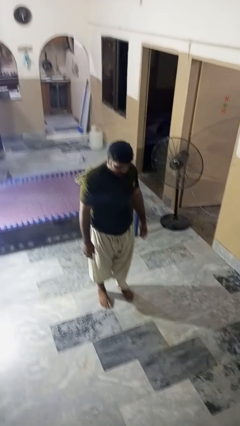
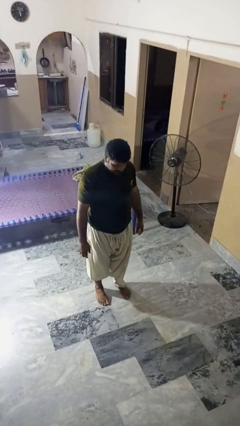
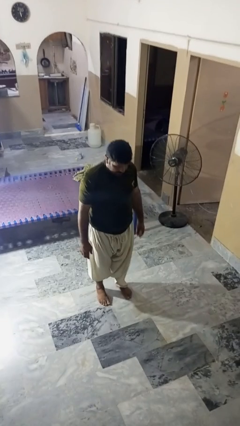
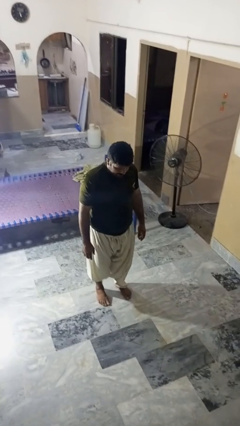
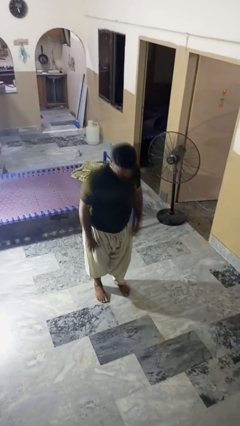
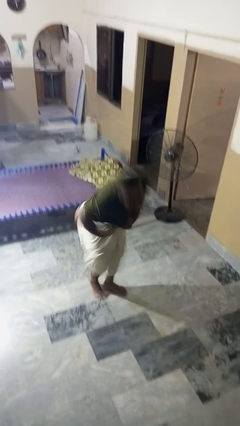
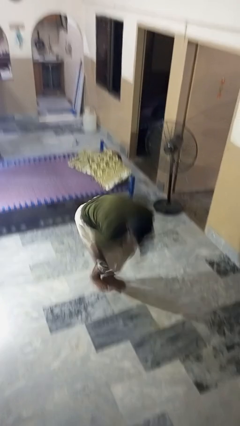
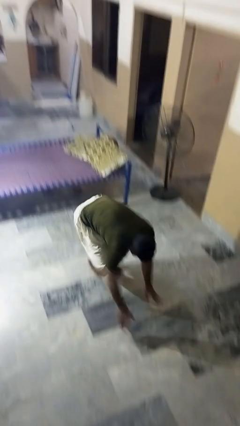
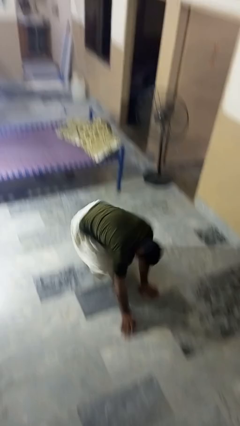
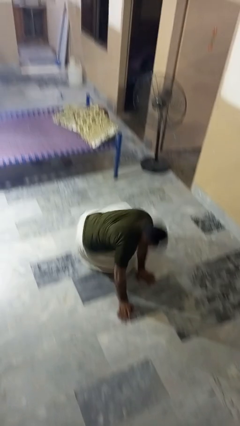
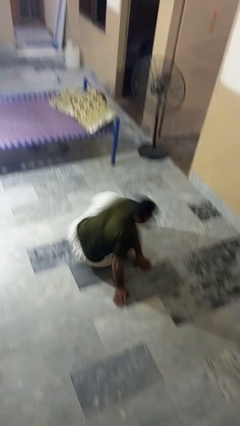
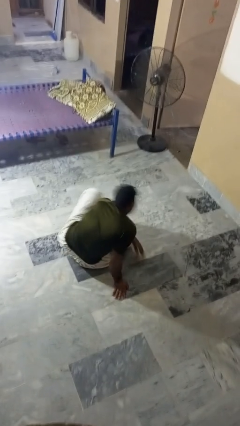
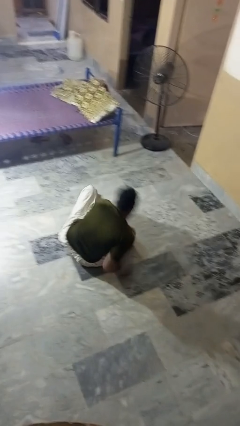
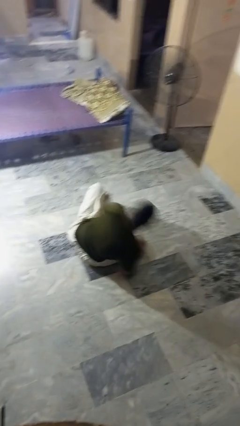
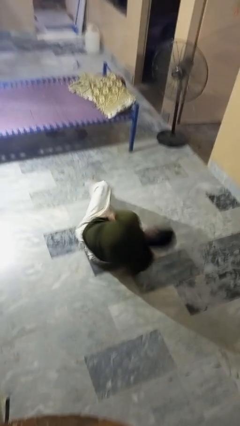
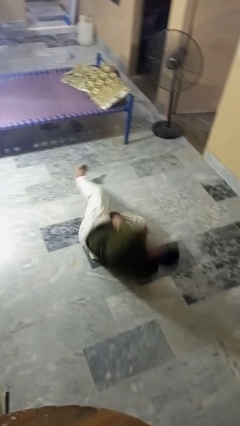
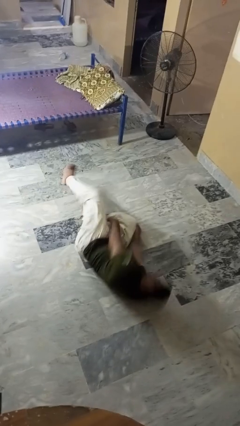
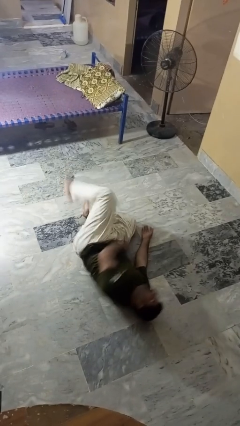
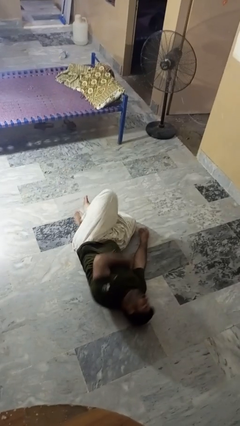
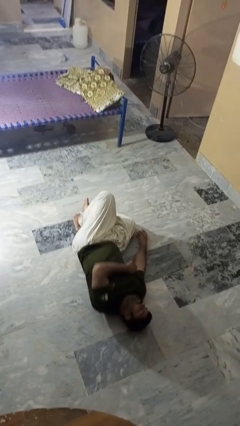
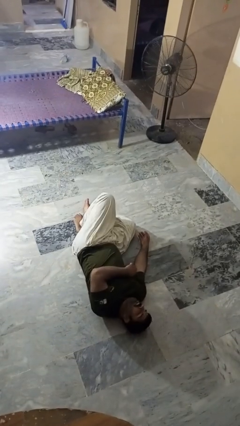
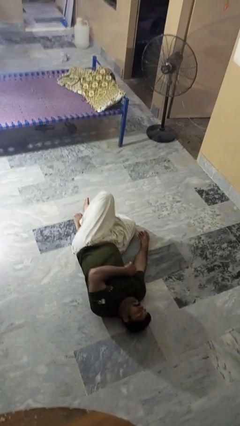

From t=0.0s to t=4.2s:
person falls while standing

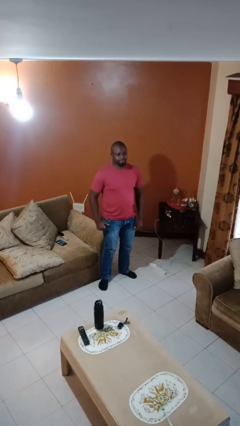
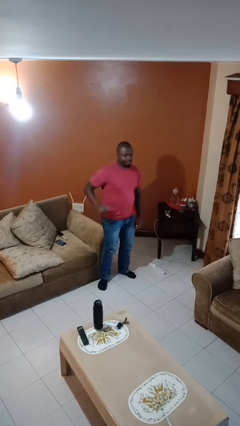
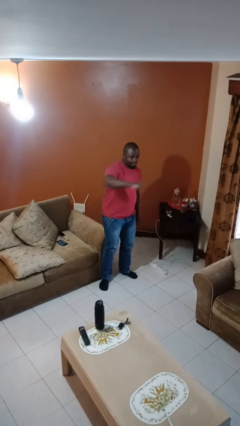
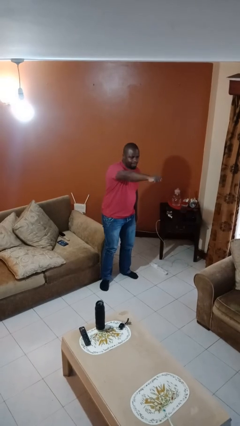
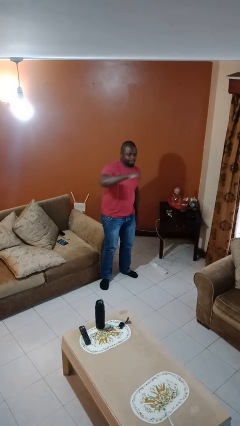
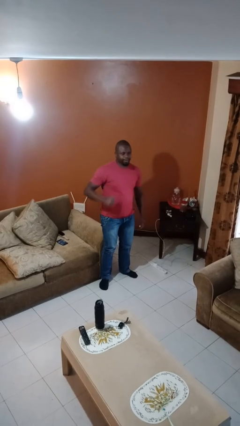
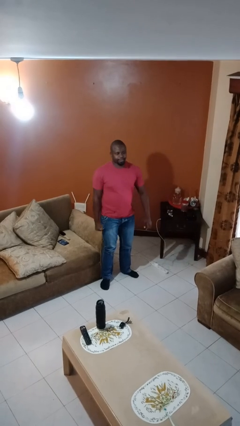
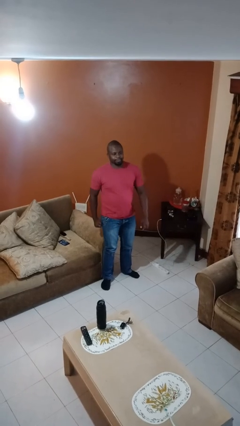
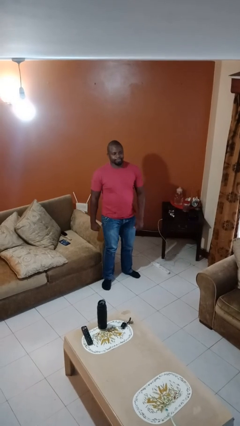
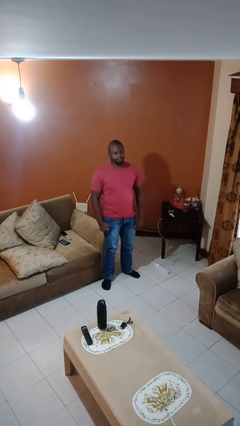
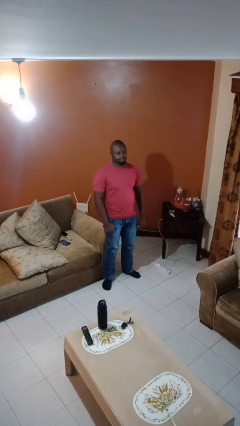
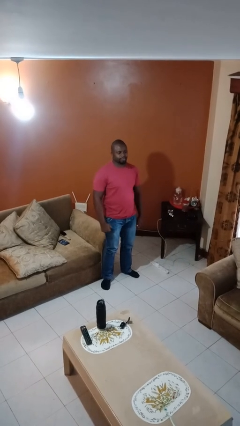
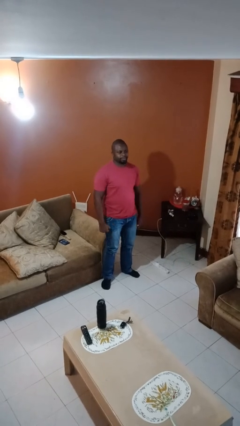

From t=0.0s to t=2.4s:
person punches

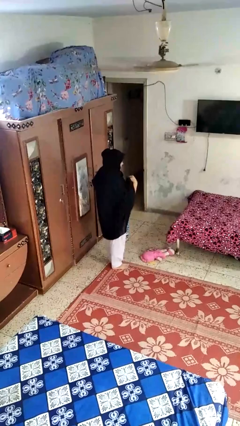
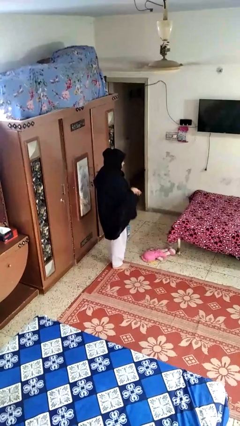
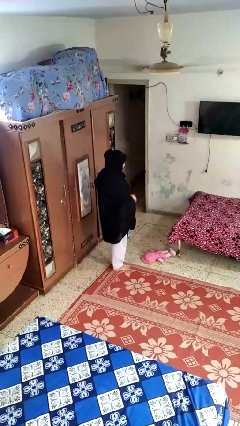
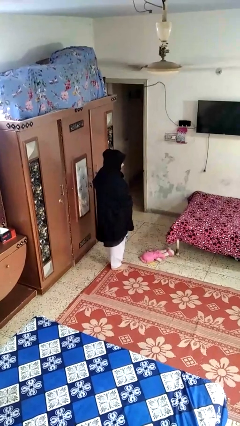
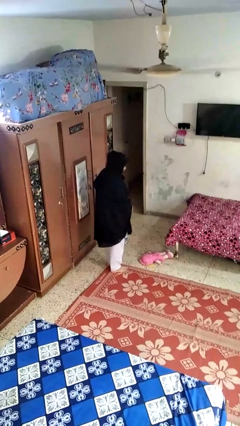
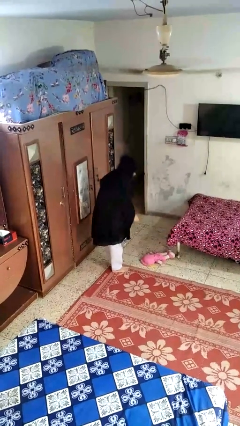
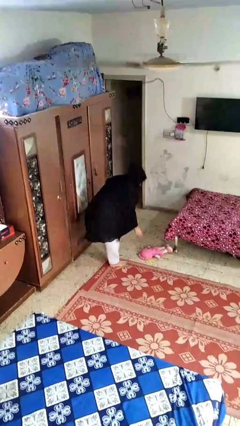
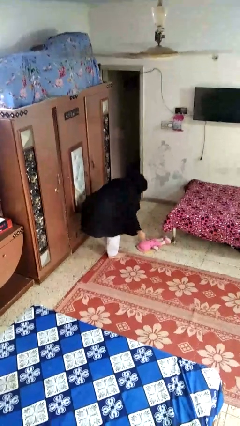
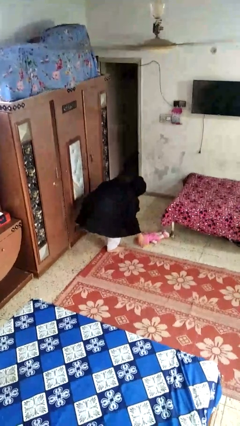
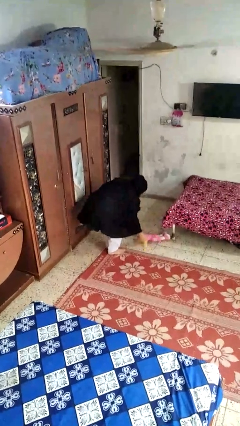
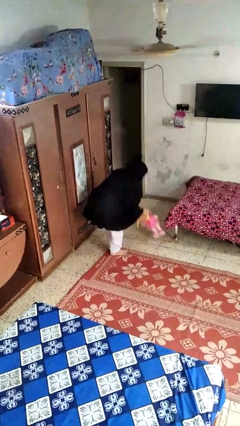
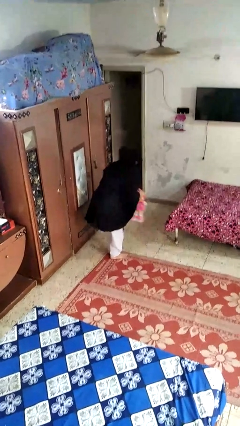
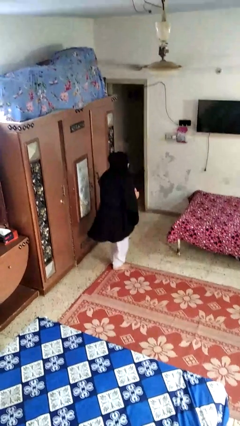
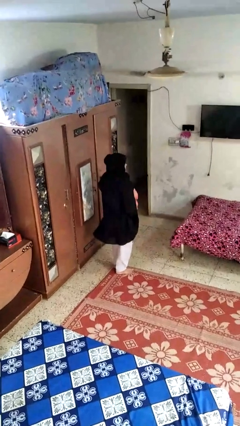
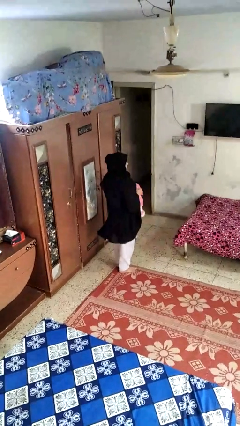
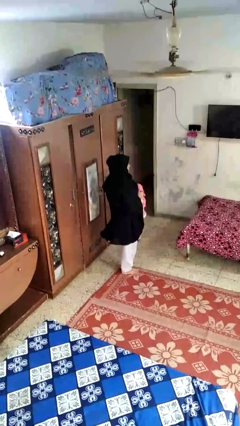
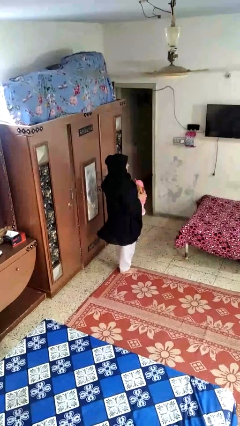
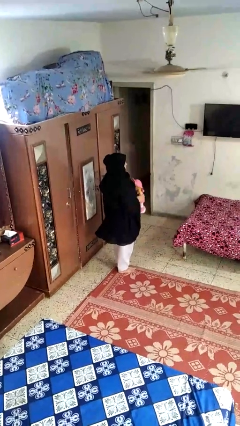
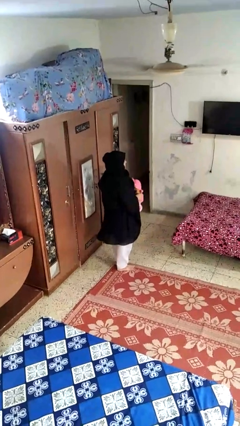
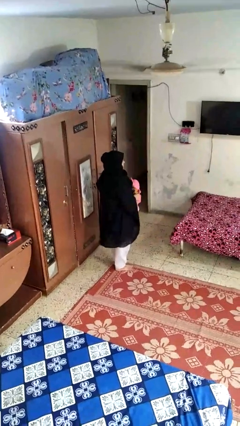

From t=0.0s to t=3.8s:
person picks up object from floor

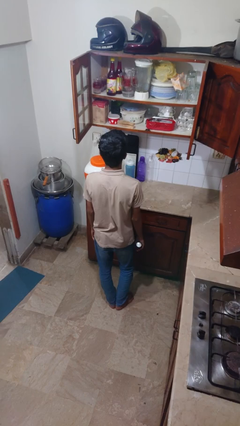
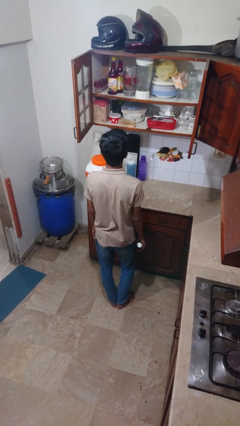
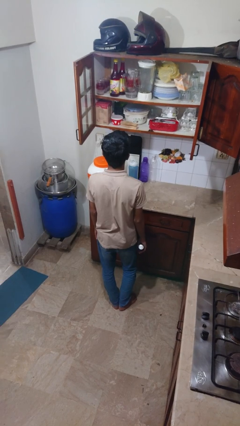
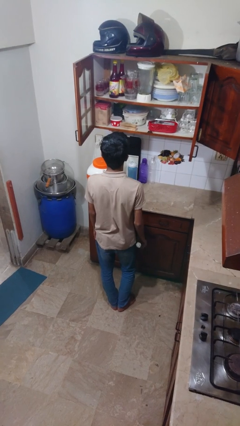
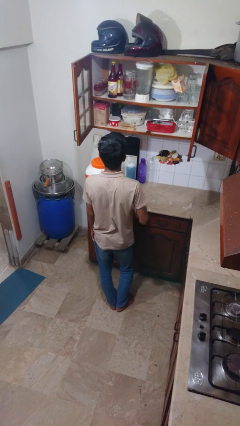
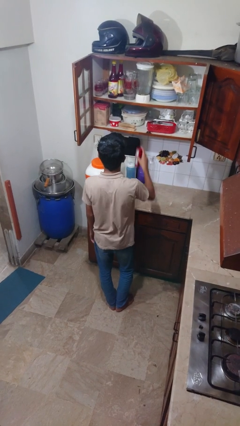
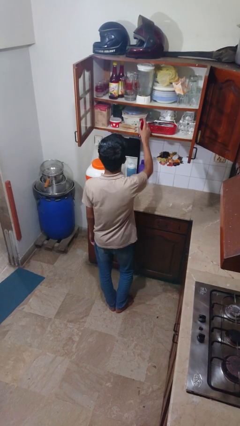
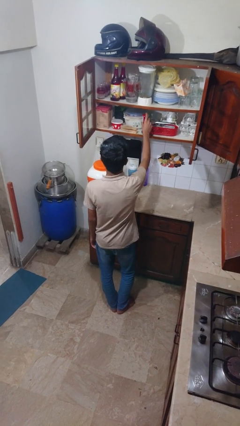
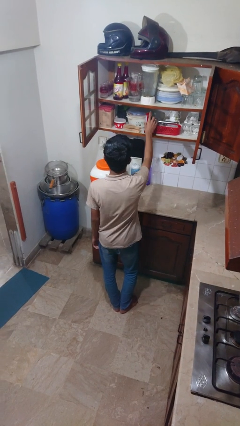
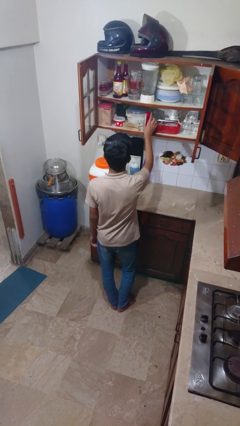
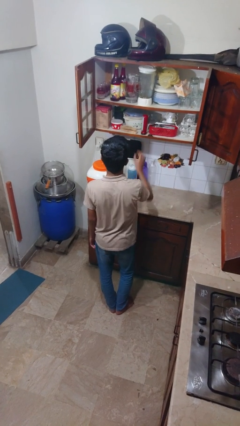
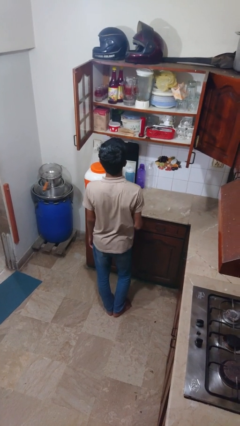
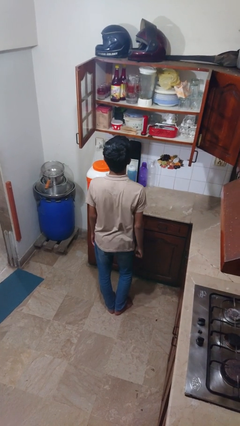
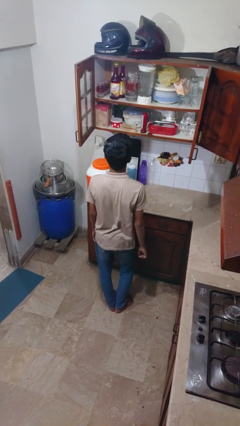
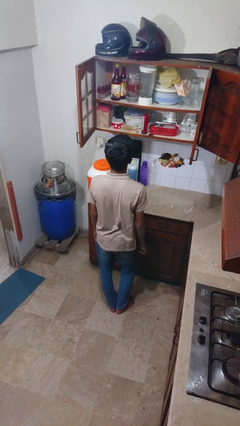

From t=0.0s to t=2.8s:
person puts down object into cabinet

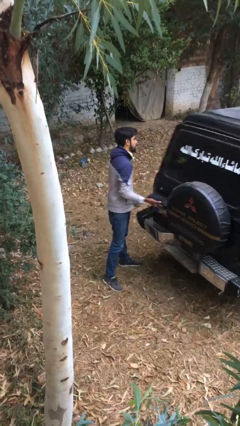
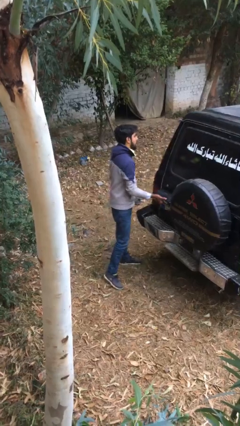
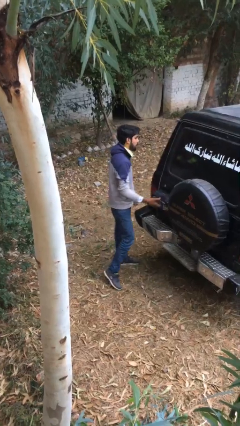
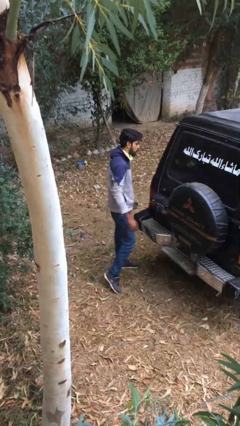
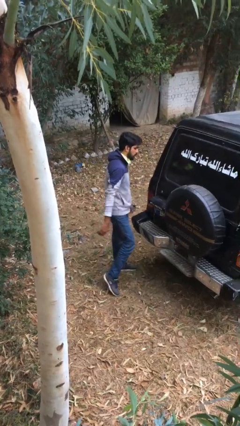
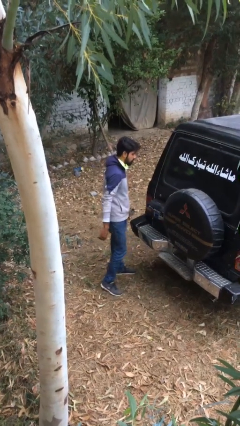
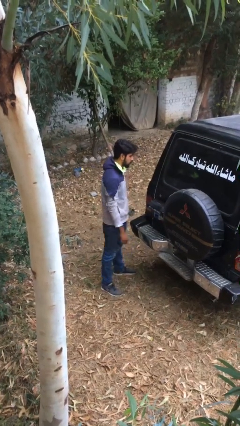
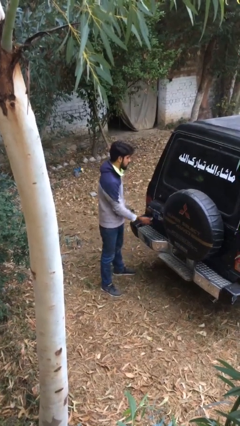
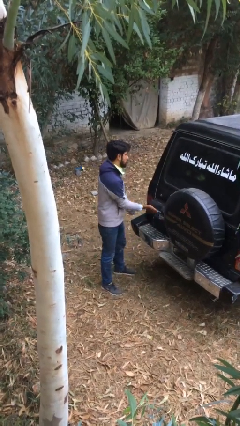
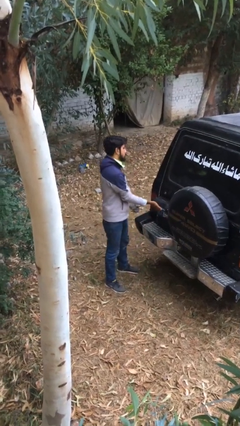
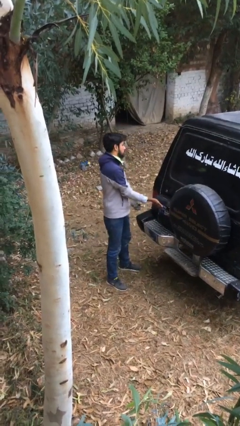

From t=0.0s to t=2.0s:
person closes car trunk

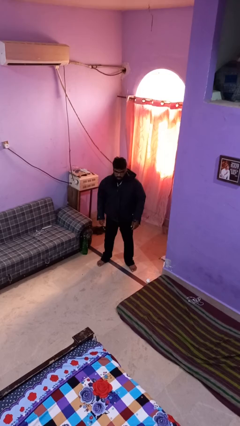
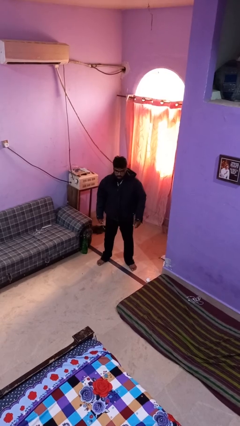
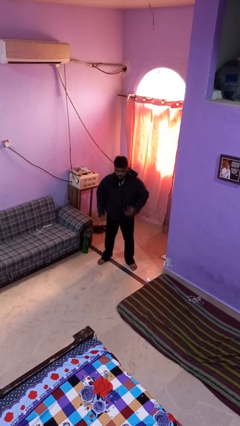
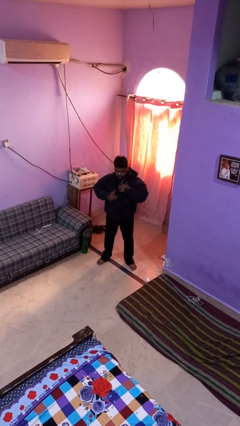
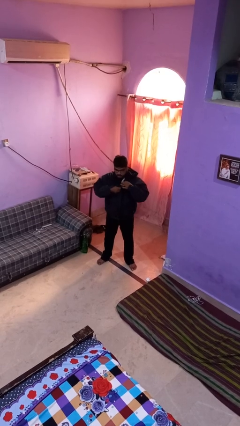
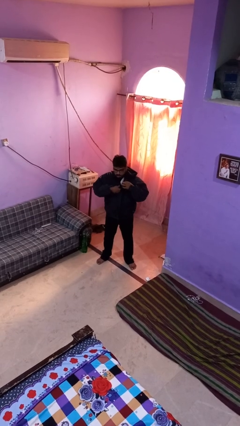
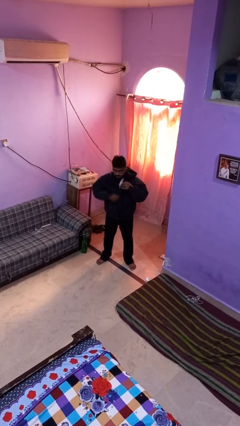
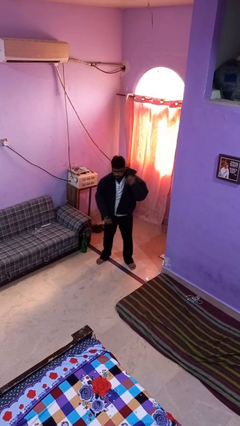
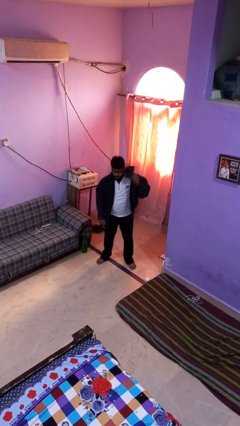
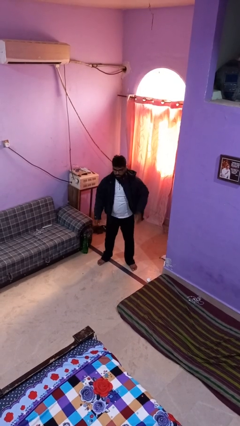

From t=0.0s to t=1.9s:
person unzips jacket
